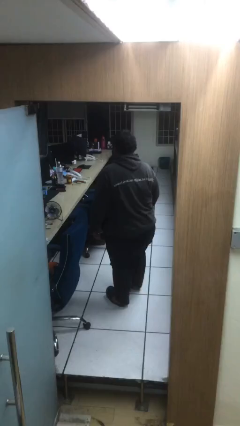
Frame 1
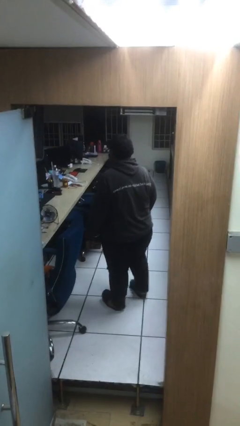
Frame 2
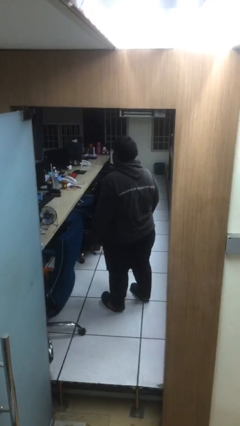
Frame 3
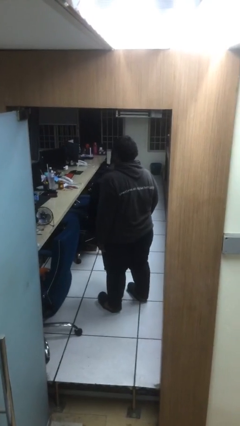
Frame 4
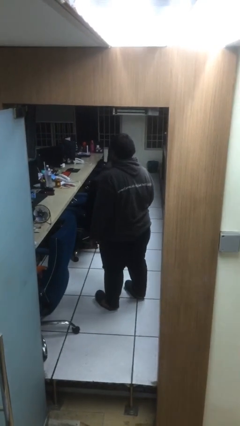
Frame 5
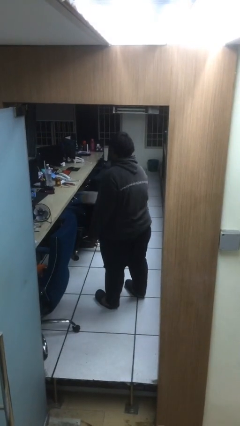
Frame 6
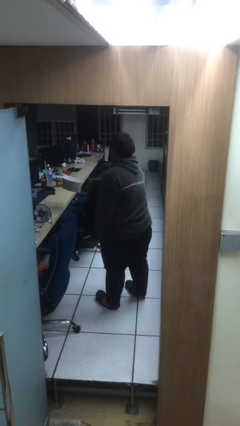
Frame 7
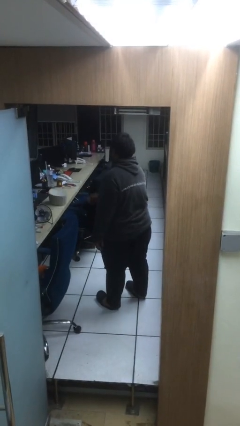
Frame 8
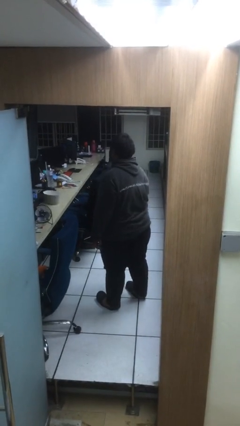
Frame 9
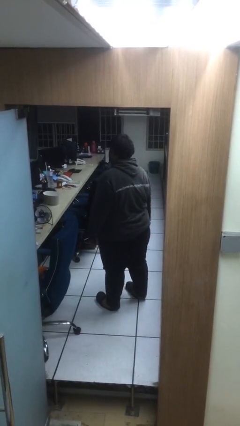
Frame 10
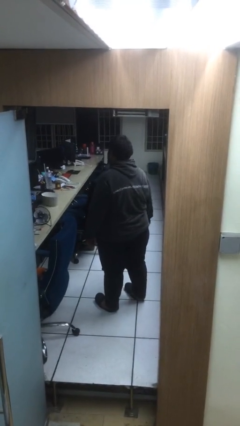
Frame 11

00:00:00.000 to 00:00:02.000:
person throws object on table

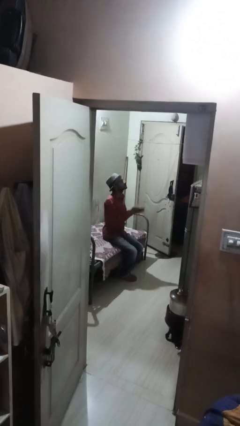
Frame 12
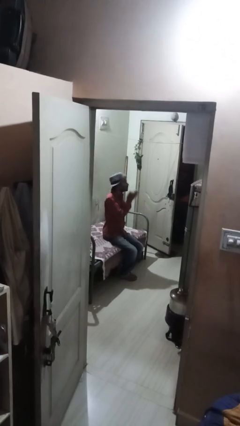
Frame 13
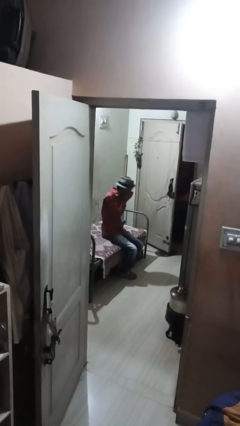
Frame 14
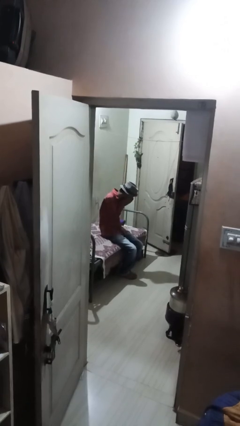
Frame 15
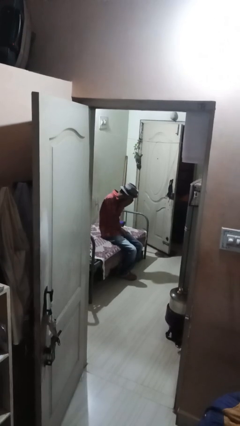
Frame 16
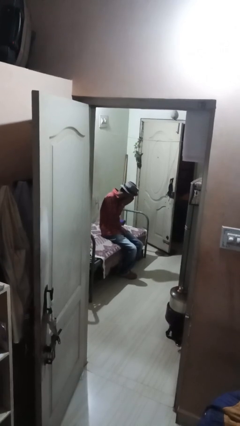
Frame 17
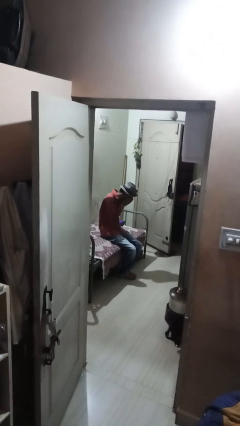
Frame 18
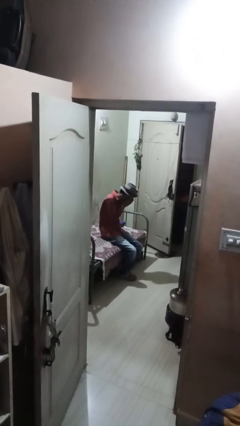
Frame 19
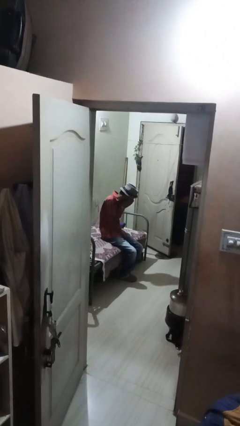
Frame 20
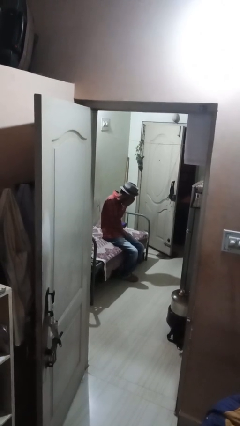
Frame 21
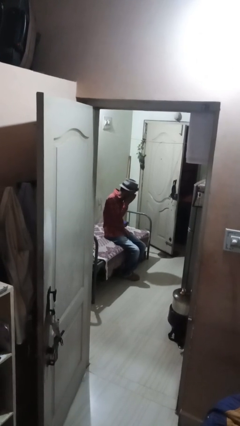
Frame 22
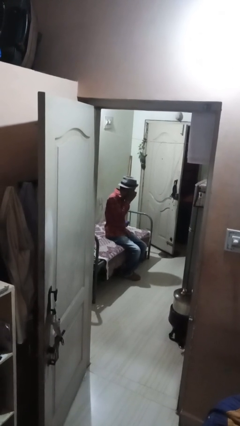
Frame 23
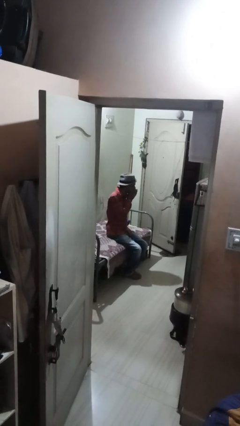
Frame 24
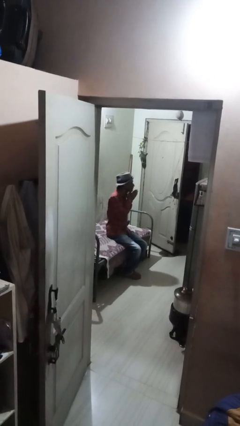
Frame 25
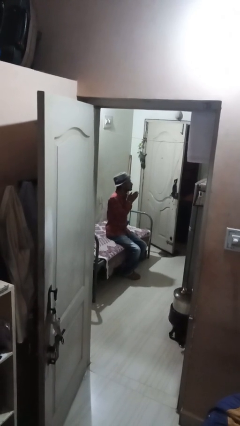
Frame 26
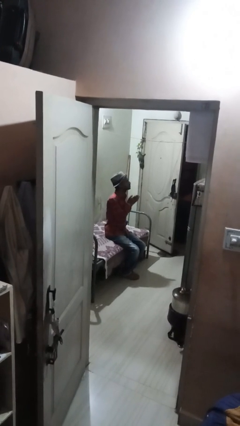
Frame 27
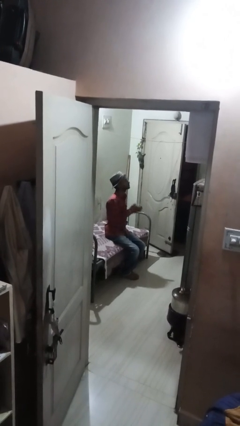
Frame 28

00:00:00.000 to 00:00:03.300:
person sneezes into hand

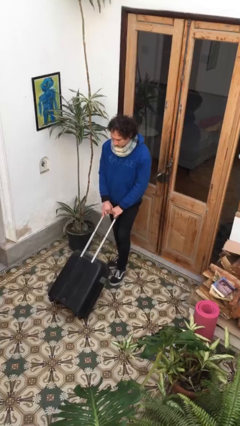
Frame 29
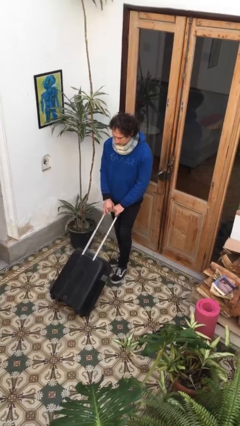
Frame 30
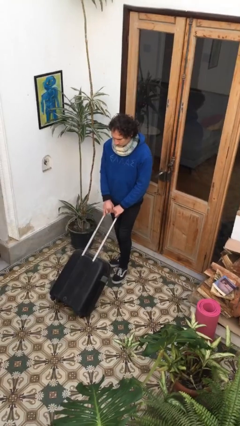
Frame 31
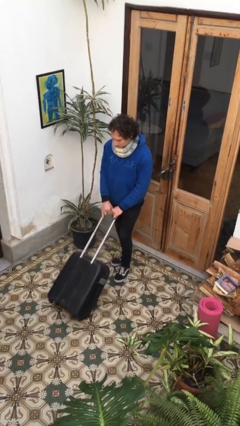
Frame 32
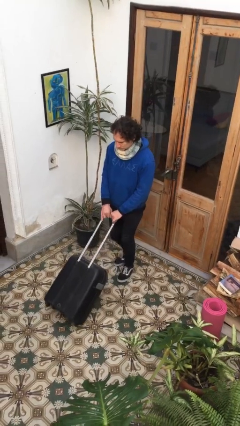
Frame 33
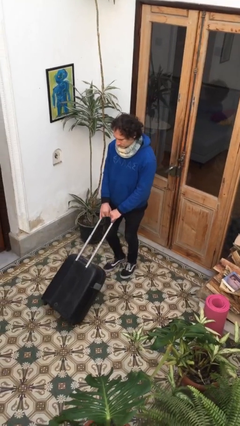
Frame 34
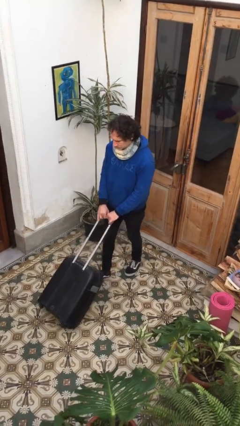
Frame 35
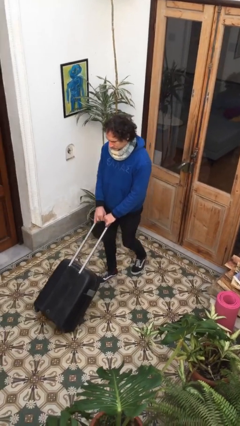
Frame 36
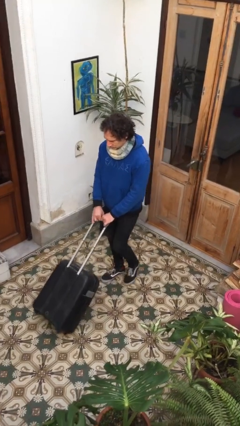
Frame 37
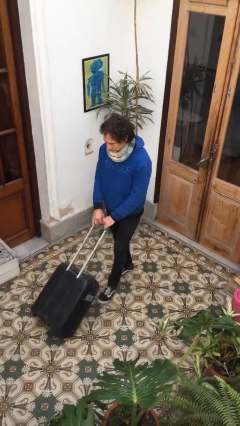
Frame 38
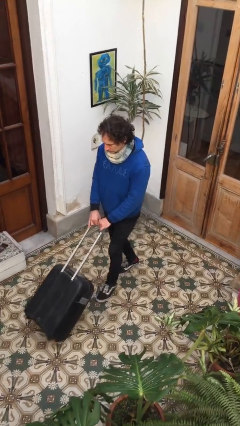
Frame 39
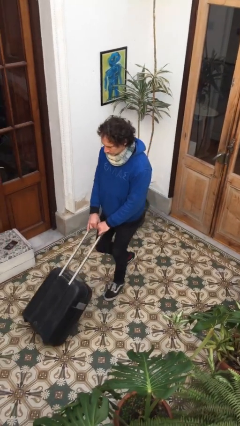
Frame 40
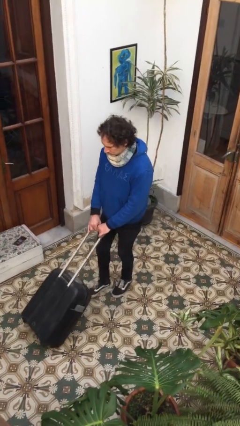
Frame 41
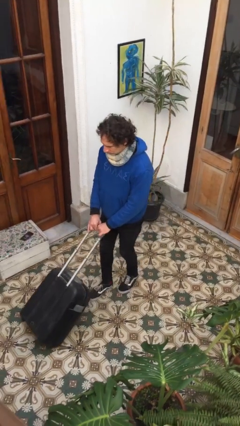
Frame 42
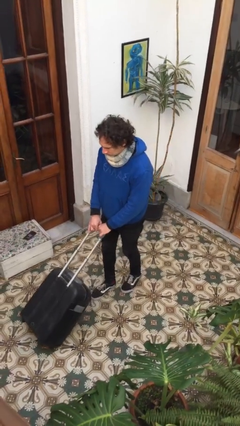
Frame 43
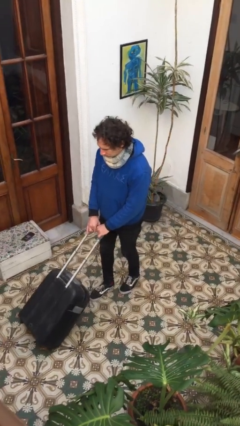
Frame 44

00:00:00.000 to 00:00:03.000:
person pushes wheeled cart

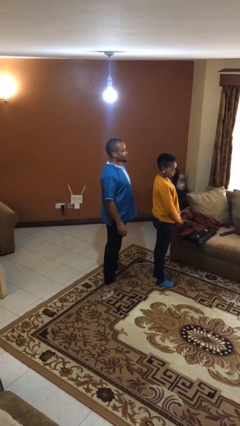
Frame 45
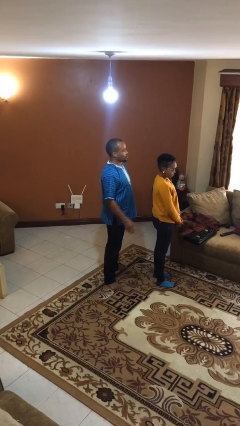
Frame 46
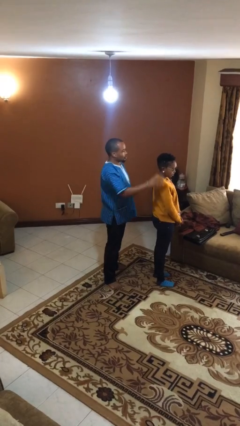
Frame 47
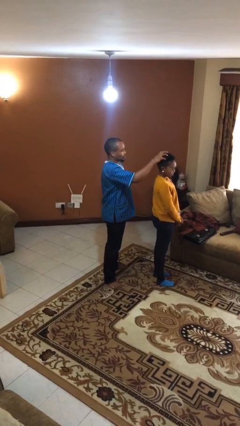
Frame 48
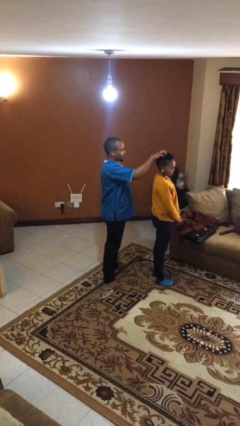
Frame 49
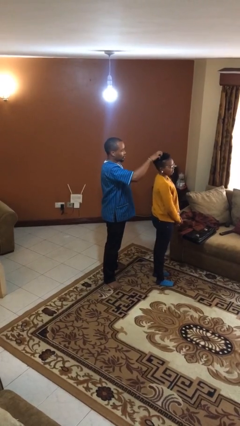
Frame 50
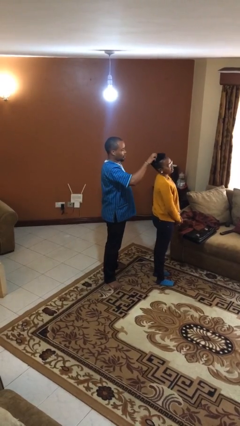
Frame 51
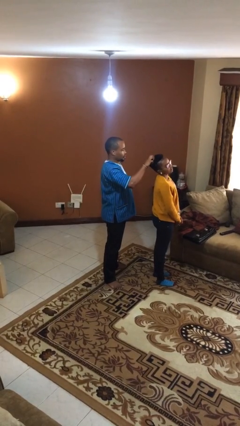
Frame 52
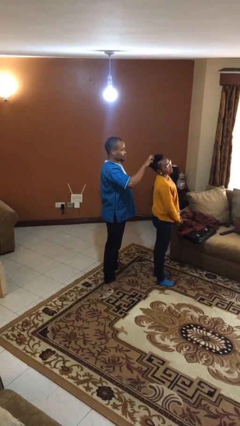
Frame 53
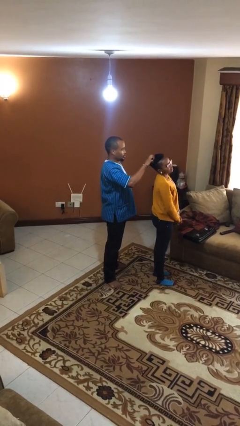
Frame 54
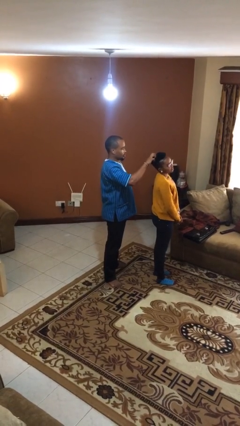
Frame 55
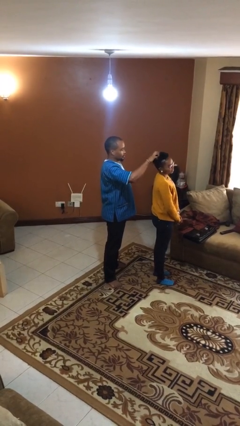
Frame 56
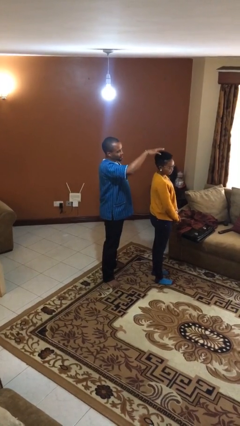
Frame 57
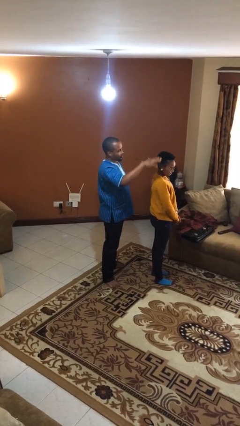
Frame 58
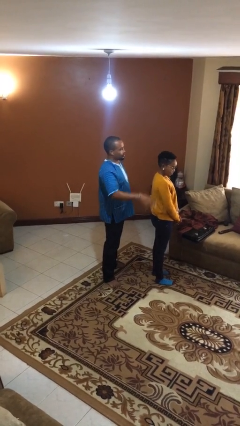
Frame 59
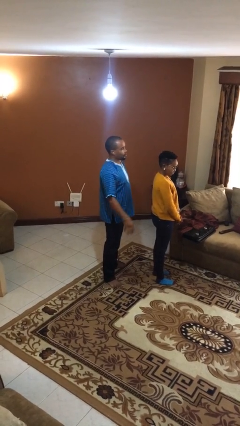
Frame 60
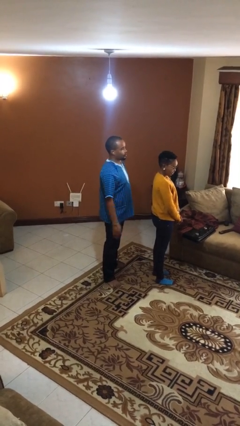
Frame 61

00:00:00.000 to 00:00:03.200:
person grabs person by hair

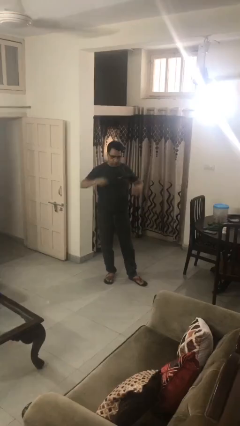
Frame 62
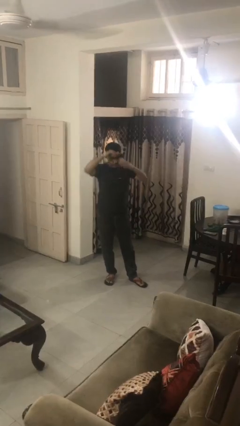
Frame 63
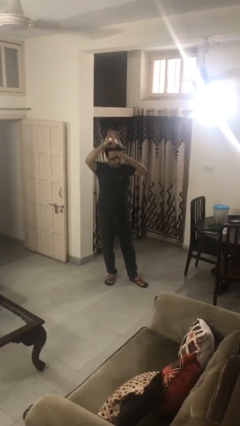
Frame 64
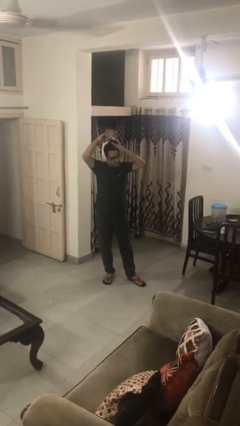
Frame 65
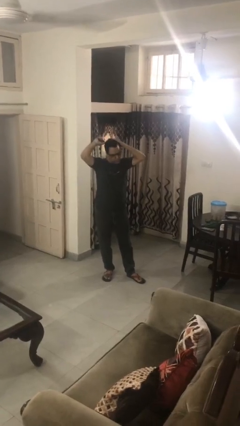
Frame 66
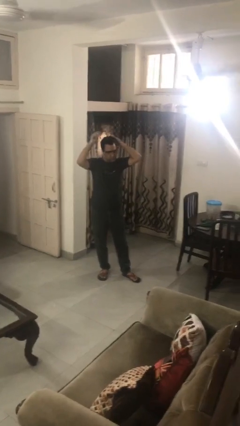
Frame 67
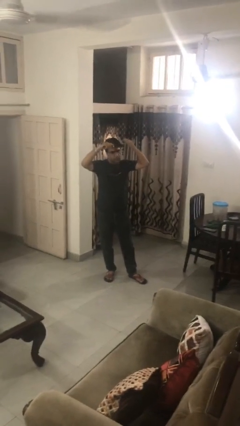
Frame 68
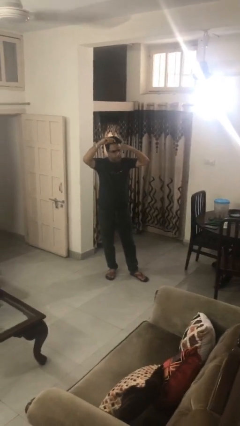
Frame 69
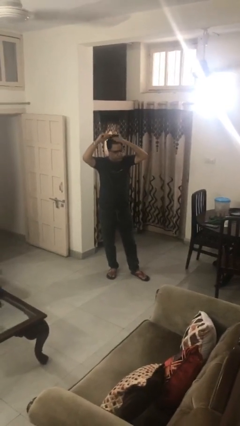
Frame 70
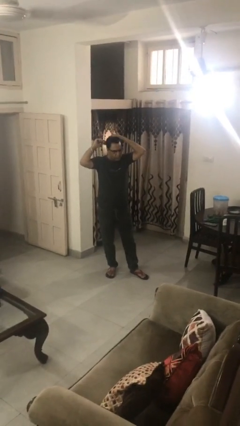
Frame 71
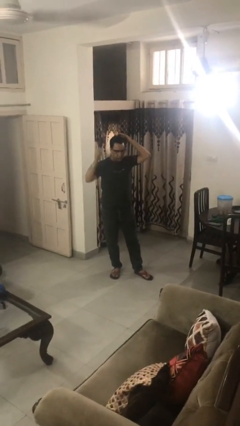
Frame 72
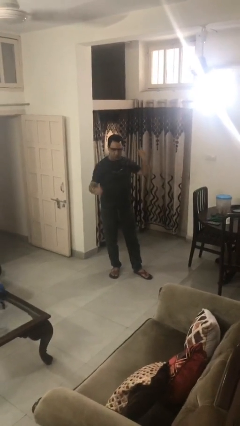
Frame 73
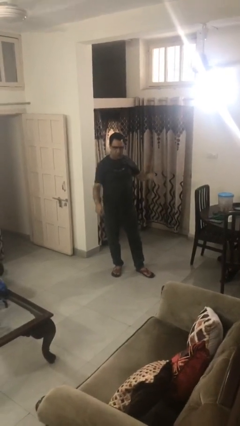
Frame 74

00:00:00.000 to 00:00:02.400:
person brushes hair

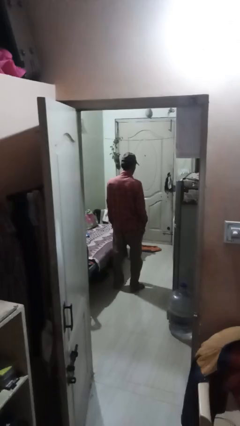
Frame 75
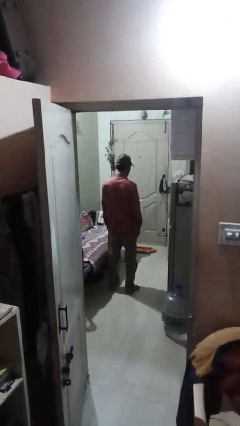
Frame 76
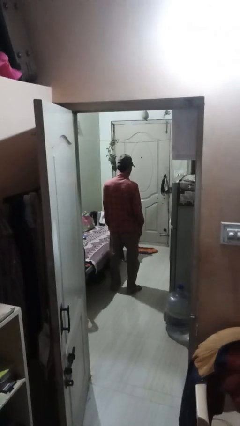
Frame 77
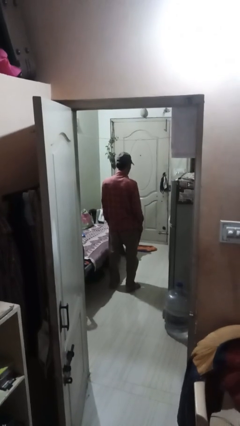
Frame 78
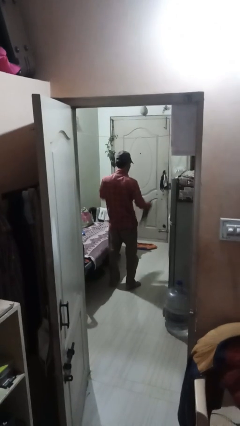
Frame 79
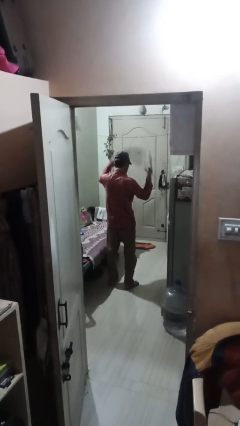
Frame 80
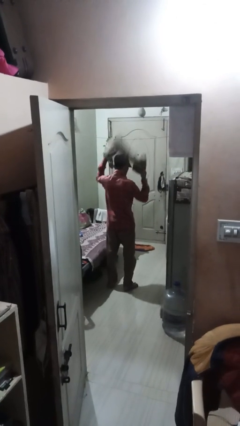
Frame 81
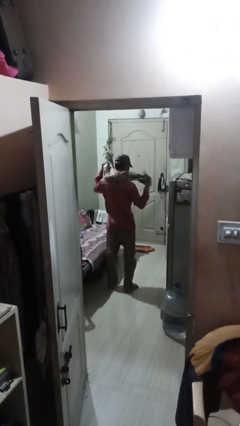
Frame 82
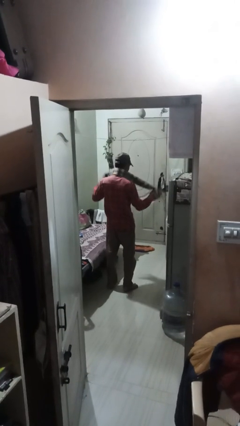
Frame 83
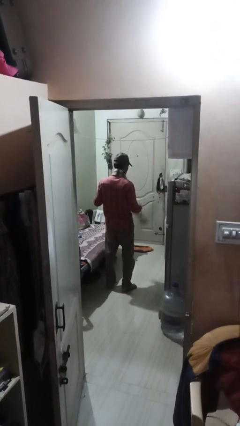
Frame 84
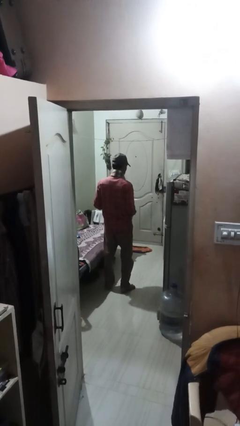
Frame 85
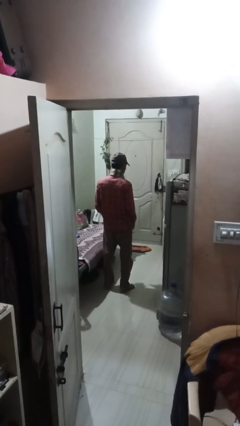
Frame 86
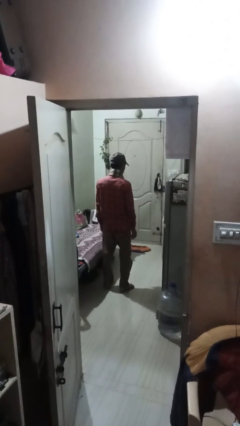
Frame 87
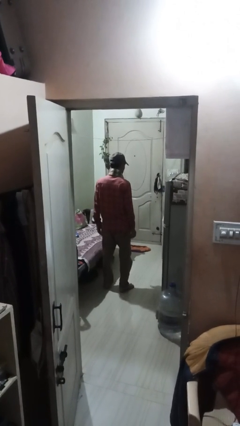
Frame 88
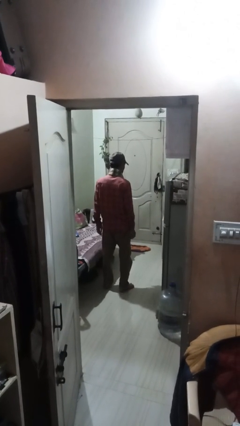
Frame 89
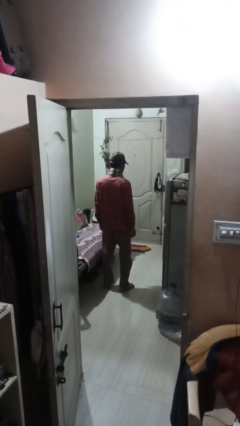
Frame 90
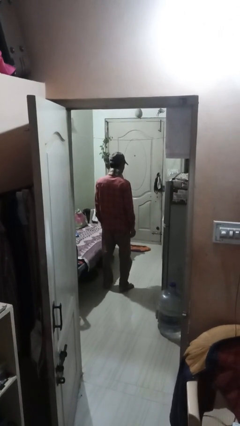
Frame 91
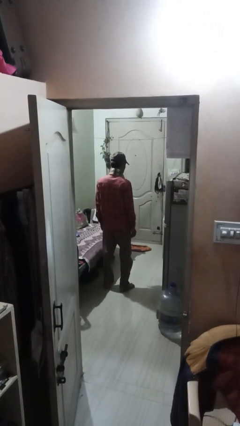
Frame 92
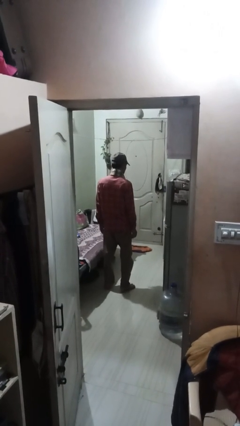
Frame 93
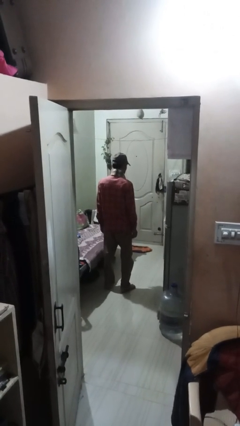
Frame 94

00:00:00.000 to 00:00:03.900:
person puts on scarf
